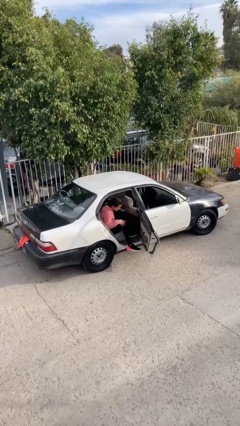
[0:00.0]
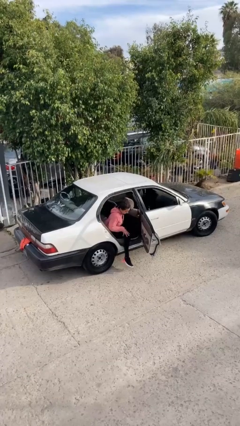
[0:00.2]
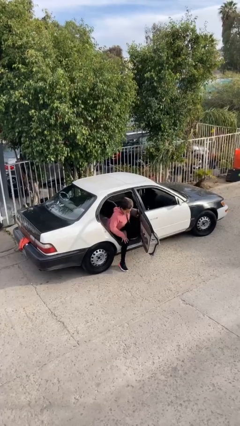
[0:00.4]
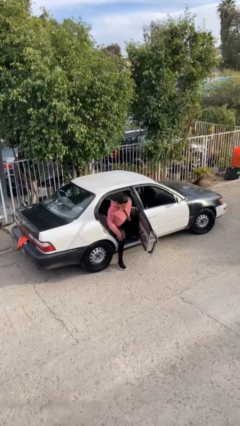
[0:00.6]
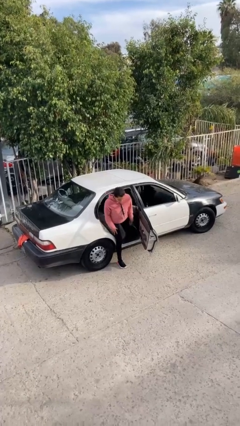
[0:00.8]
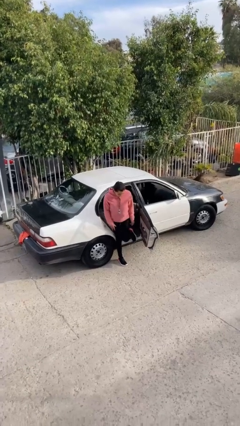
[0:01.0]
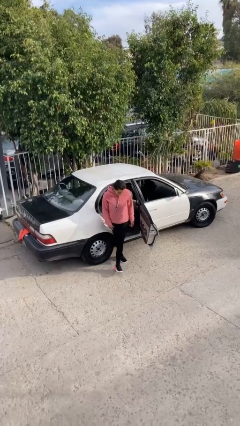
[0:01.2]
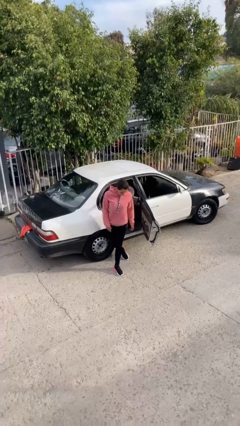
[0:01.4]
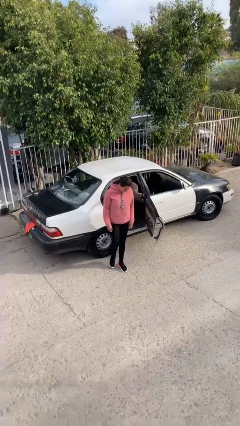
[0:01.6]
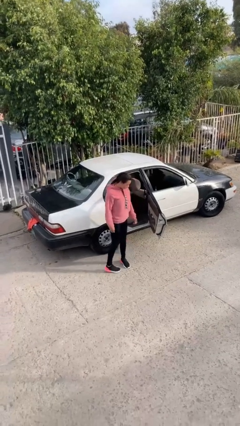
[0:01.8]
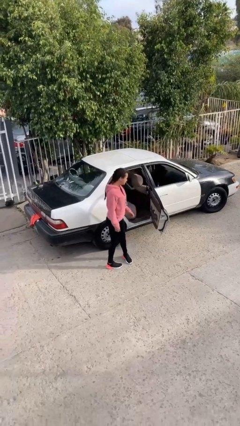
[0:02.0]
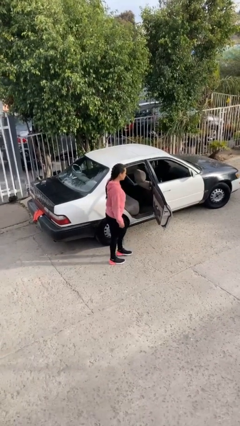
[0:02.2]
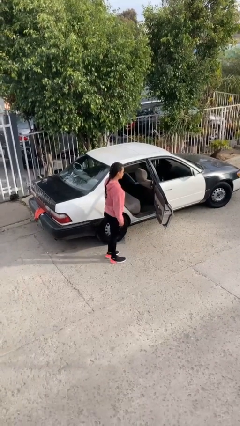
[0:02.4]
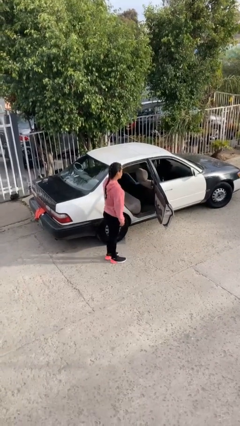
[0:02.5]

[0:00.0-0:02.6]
person exits car

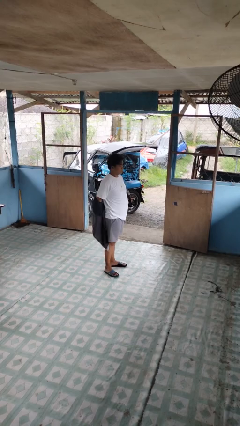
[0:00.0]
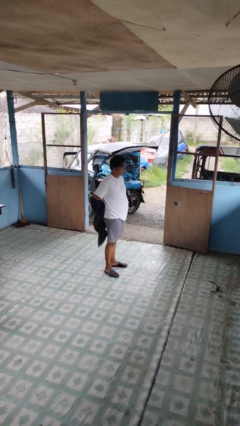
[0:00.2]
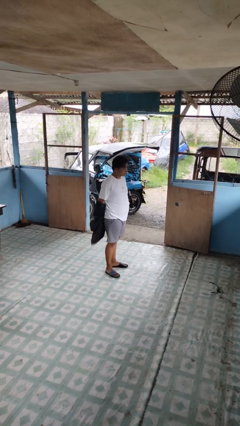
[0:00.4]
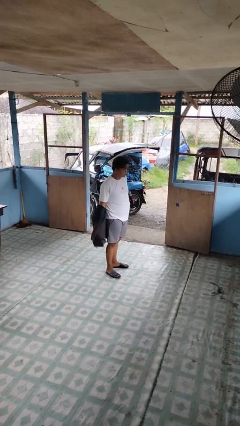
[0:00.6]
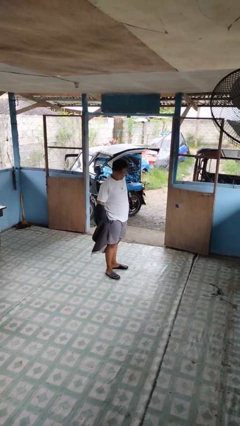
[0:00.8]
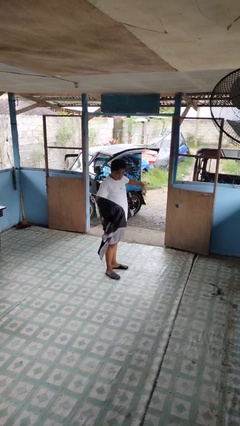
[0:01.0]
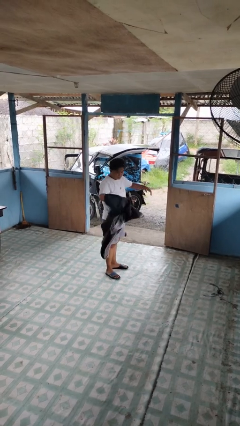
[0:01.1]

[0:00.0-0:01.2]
person takes off jacket

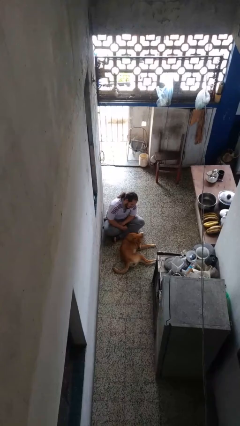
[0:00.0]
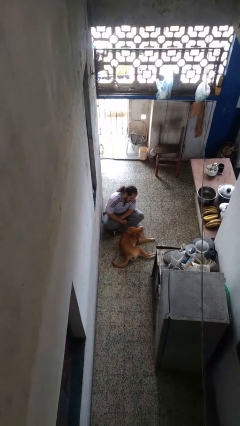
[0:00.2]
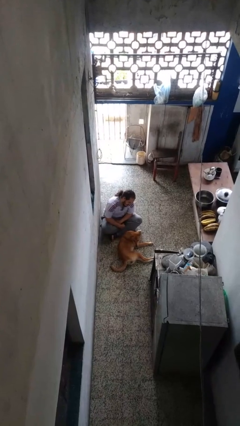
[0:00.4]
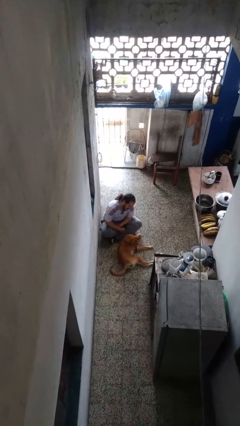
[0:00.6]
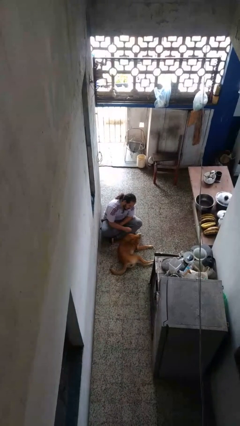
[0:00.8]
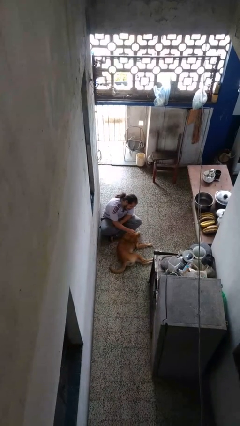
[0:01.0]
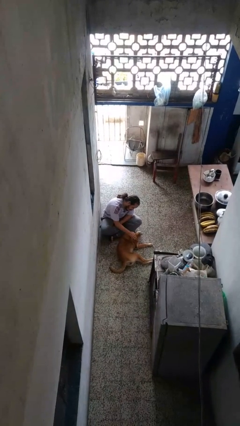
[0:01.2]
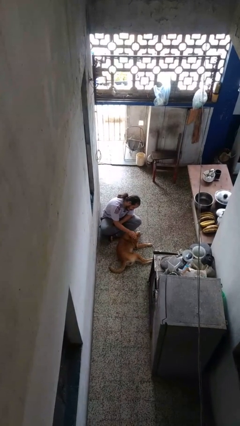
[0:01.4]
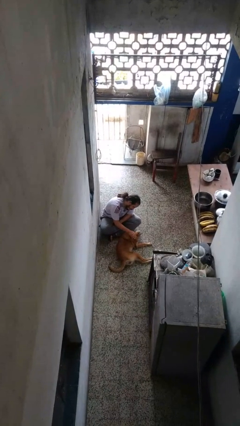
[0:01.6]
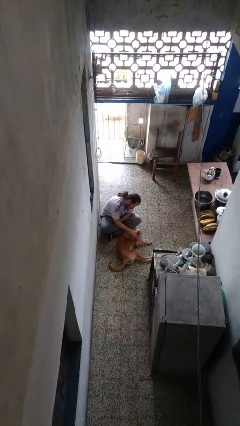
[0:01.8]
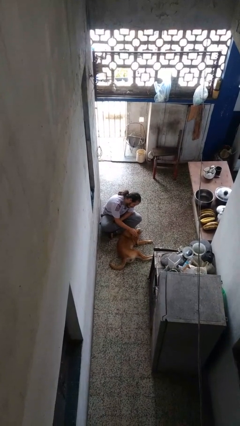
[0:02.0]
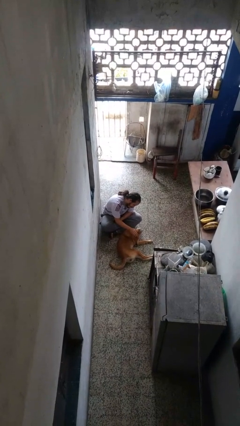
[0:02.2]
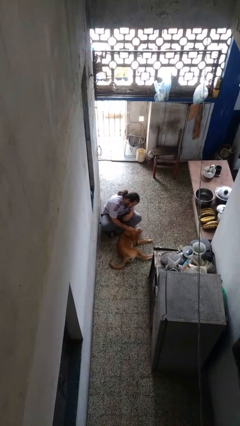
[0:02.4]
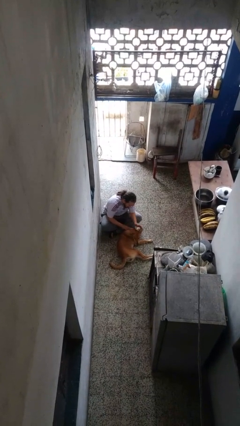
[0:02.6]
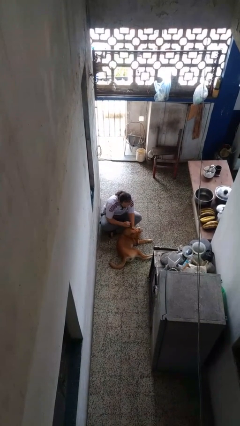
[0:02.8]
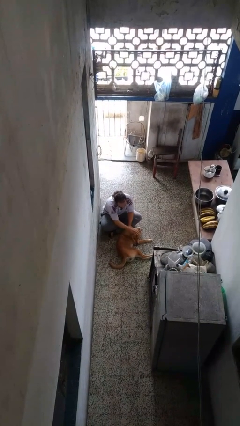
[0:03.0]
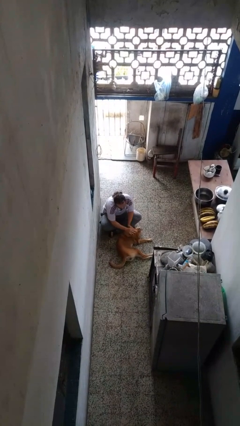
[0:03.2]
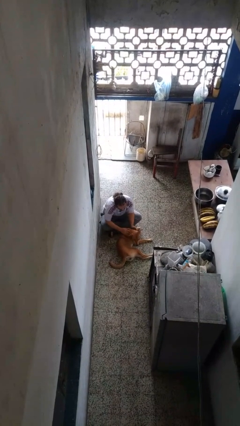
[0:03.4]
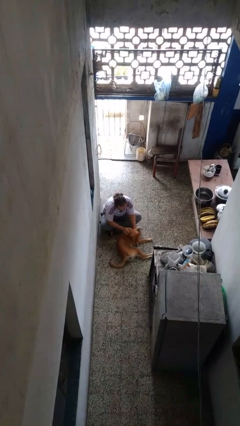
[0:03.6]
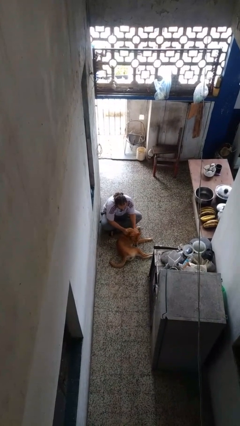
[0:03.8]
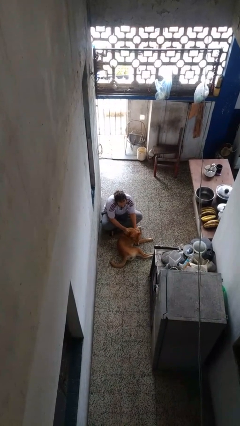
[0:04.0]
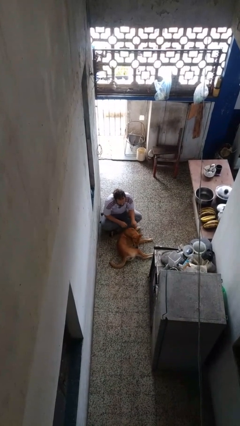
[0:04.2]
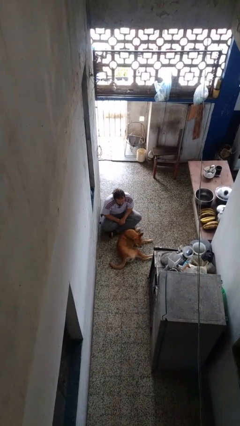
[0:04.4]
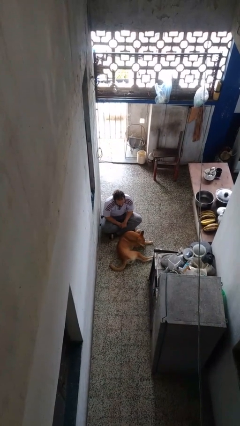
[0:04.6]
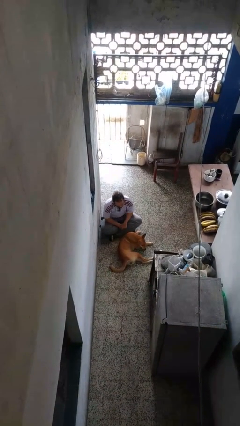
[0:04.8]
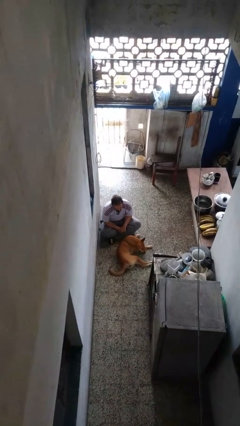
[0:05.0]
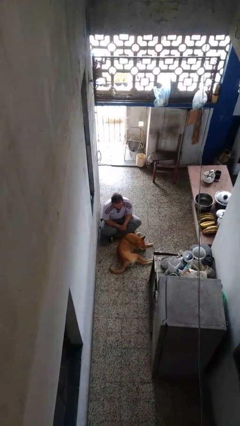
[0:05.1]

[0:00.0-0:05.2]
person pets dog

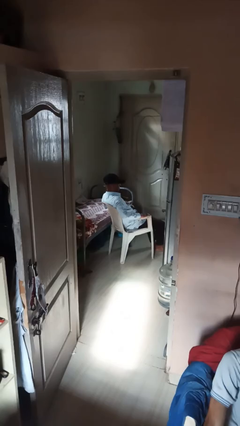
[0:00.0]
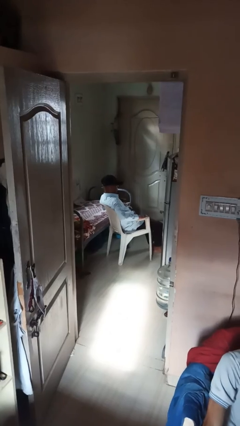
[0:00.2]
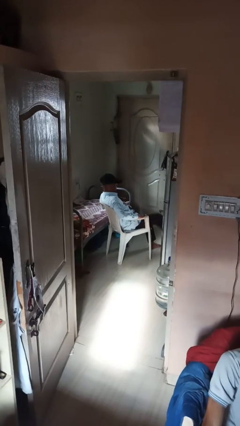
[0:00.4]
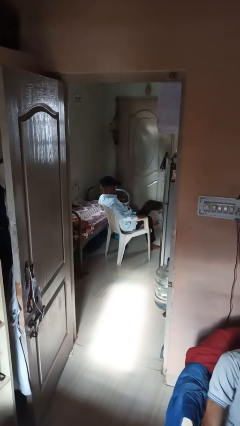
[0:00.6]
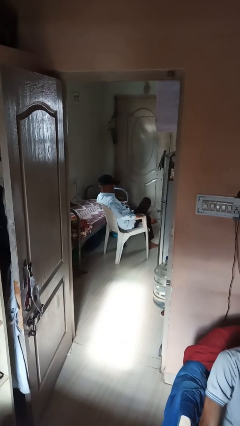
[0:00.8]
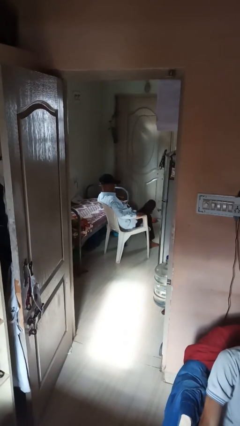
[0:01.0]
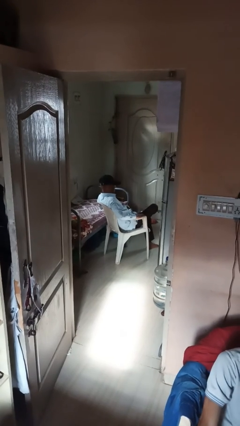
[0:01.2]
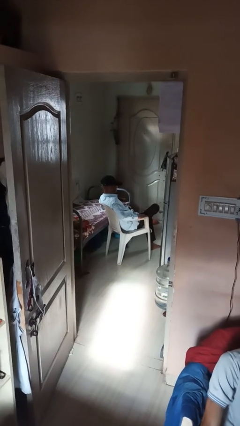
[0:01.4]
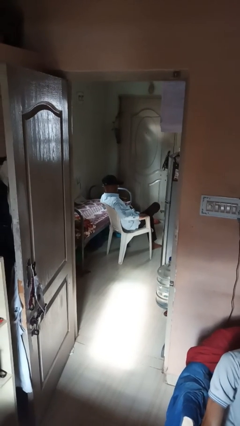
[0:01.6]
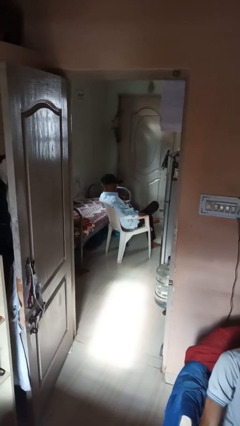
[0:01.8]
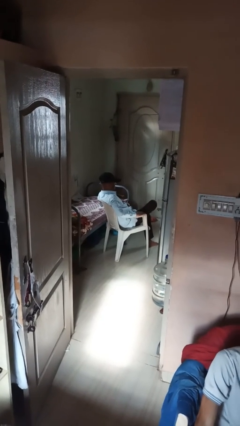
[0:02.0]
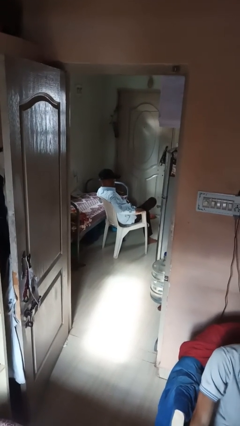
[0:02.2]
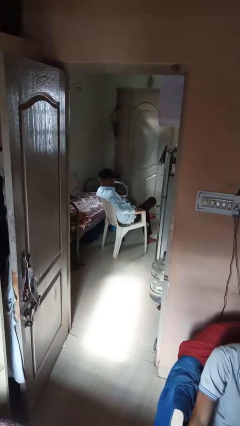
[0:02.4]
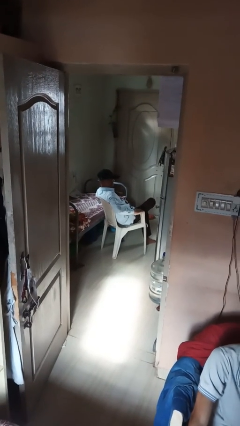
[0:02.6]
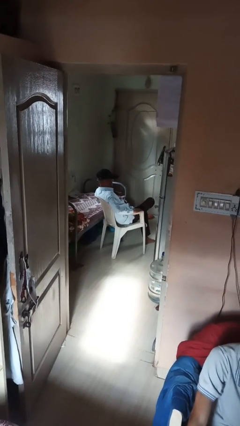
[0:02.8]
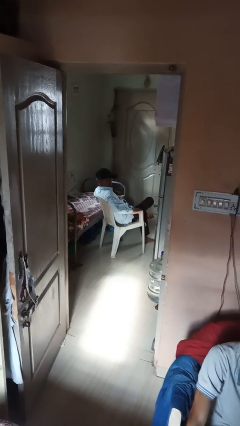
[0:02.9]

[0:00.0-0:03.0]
person crosses legs

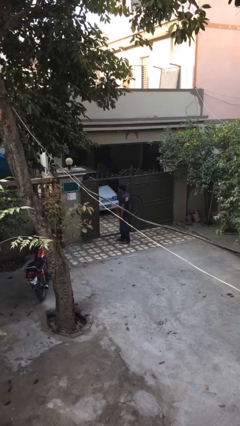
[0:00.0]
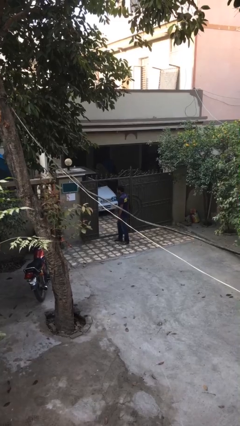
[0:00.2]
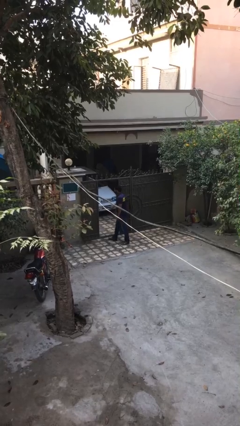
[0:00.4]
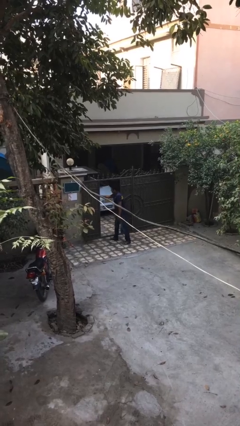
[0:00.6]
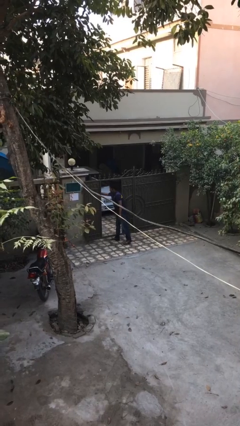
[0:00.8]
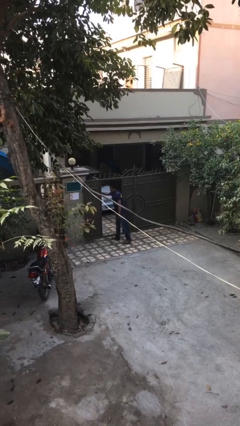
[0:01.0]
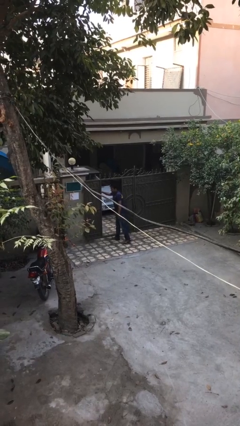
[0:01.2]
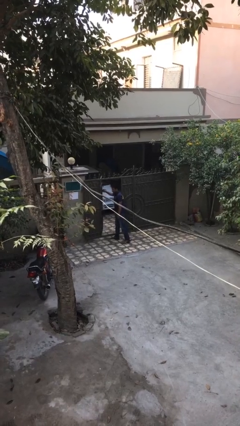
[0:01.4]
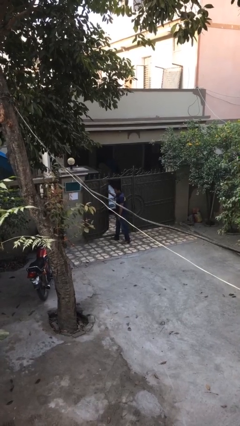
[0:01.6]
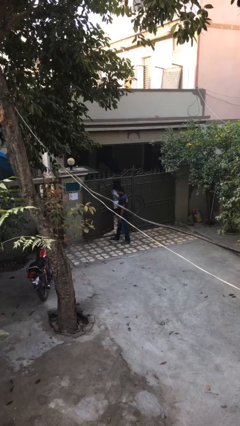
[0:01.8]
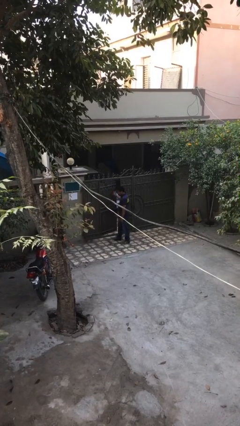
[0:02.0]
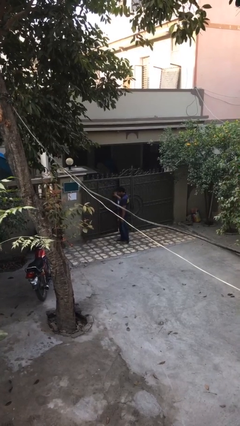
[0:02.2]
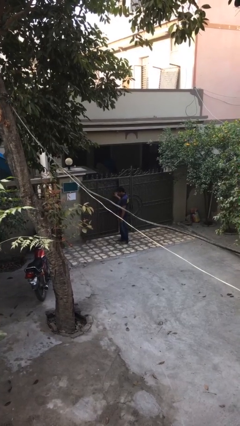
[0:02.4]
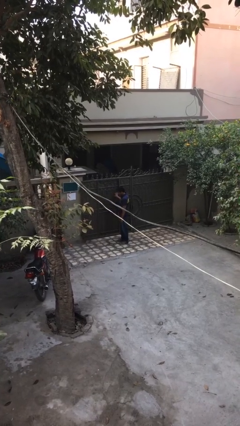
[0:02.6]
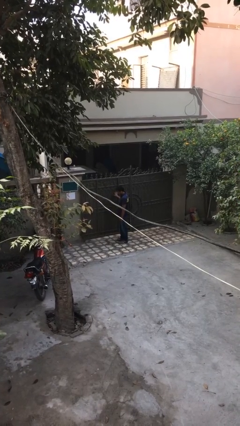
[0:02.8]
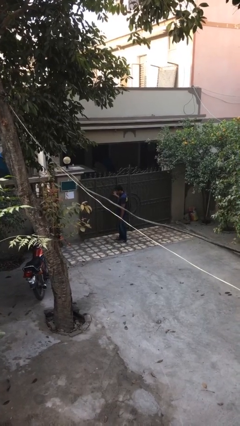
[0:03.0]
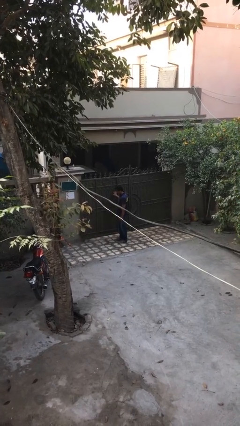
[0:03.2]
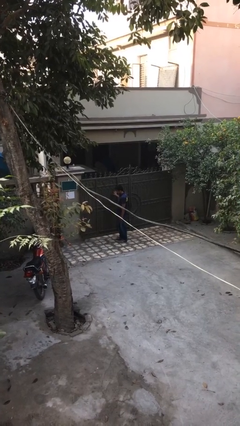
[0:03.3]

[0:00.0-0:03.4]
person closes facility door

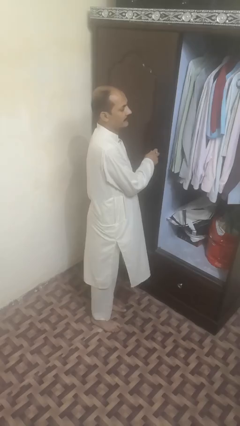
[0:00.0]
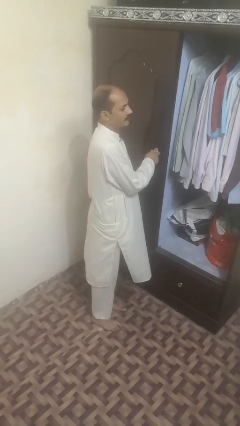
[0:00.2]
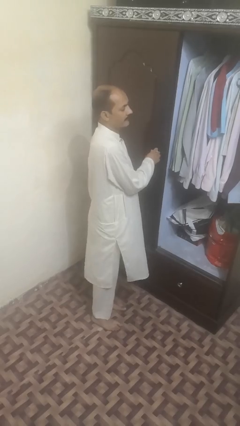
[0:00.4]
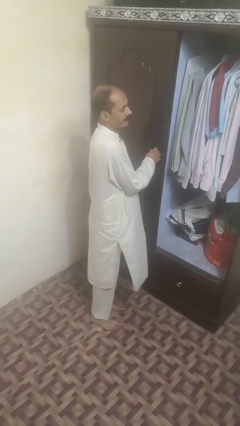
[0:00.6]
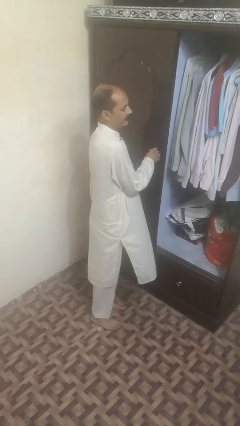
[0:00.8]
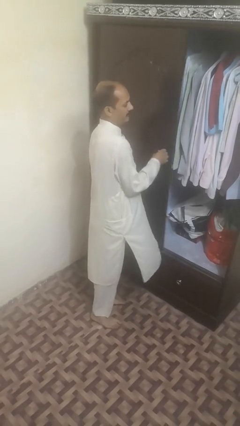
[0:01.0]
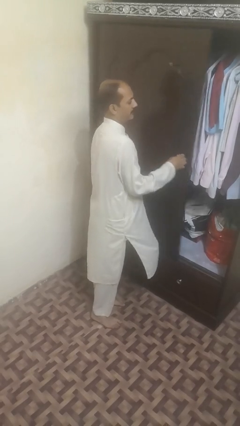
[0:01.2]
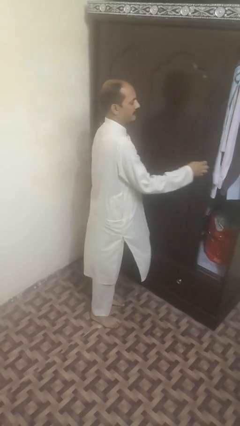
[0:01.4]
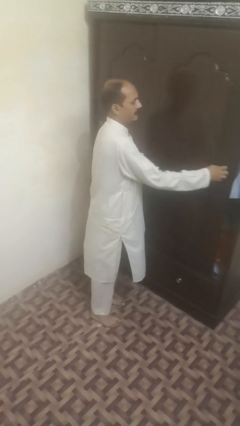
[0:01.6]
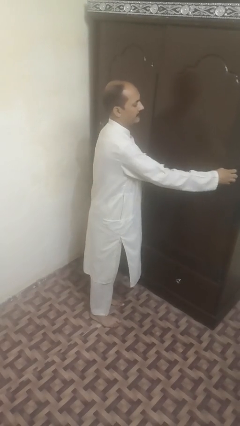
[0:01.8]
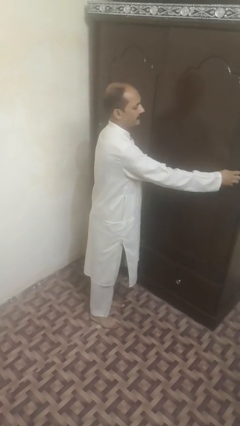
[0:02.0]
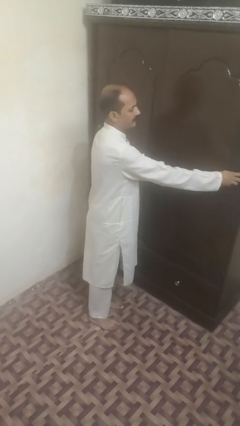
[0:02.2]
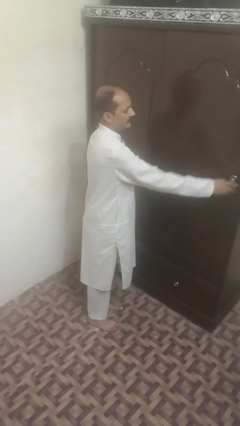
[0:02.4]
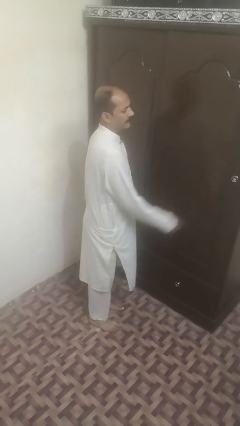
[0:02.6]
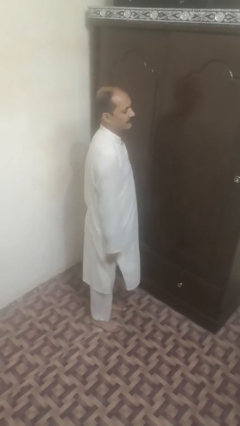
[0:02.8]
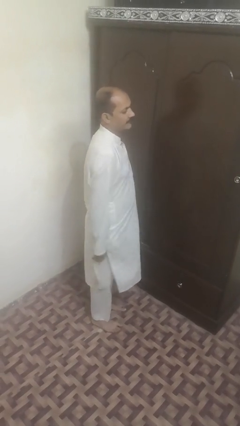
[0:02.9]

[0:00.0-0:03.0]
person closes sliding door
